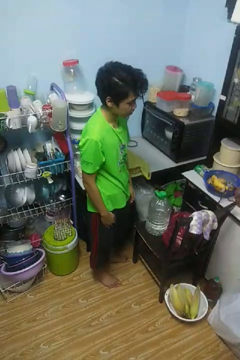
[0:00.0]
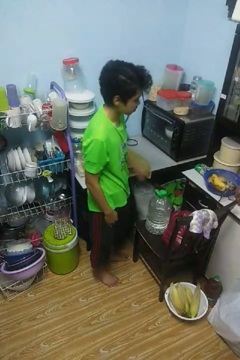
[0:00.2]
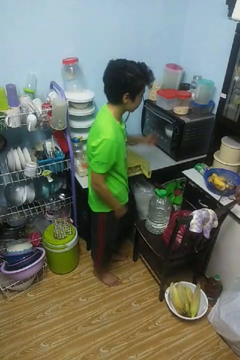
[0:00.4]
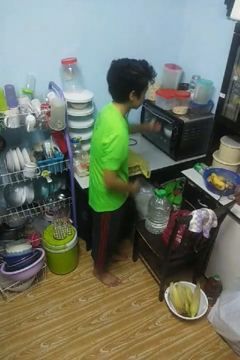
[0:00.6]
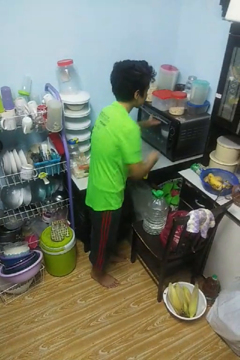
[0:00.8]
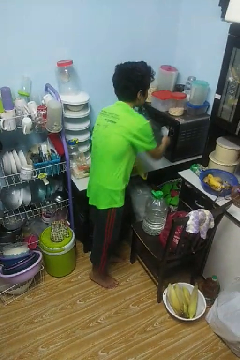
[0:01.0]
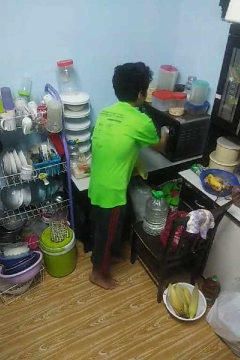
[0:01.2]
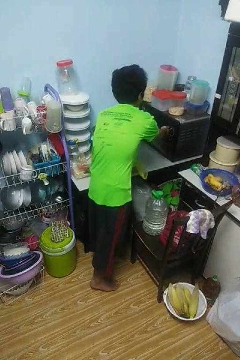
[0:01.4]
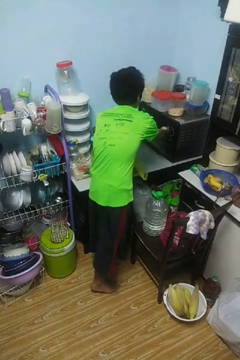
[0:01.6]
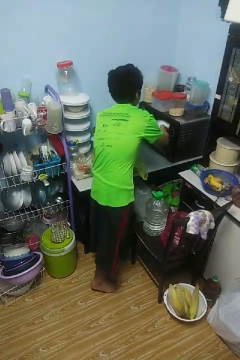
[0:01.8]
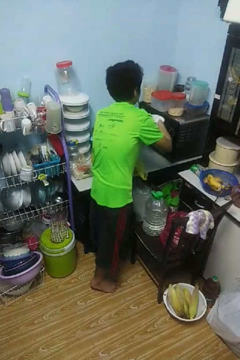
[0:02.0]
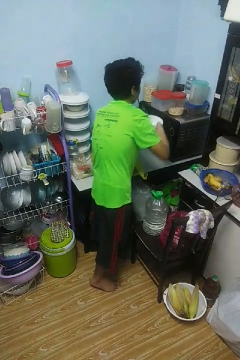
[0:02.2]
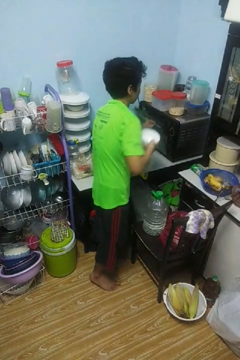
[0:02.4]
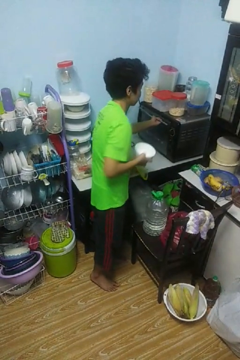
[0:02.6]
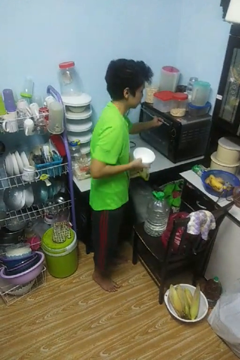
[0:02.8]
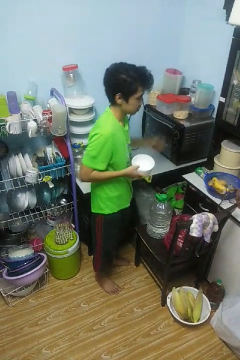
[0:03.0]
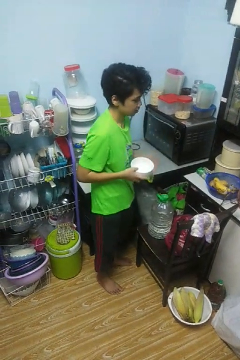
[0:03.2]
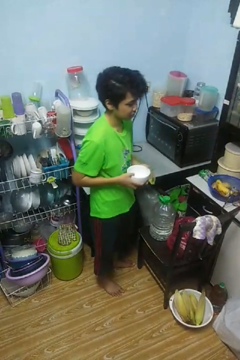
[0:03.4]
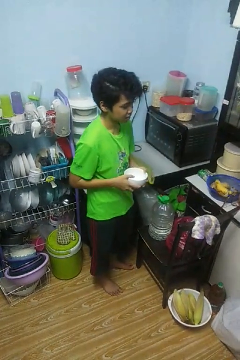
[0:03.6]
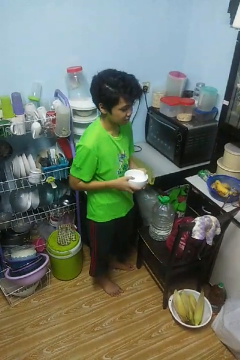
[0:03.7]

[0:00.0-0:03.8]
person takes object from microwave

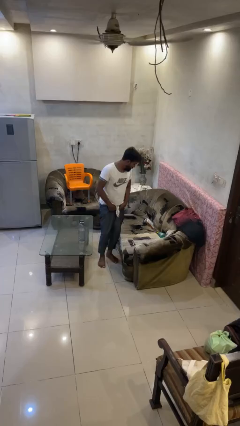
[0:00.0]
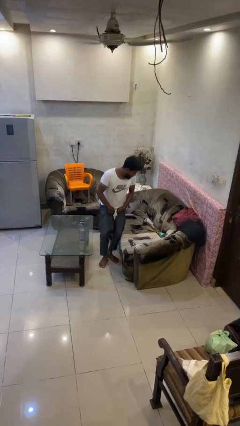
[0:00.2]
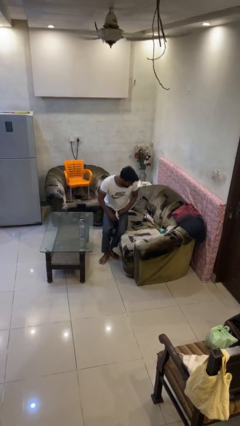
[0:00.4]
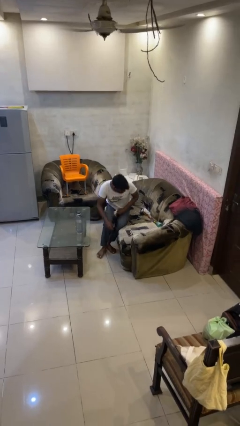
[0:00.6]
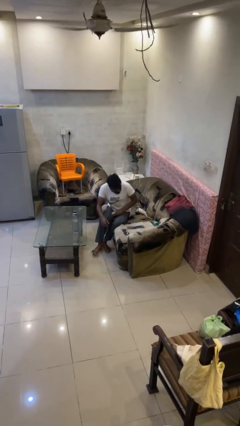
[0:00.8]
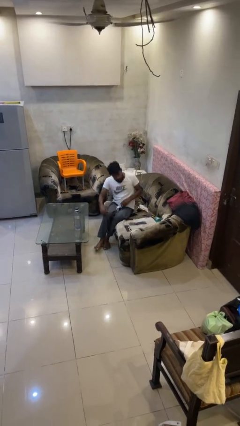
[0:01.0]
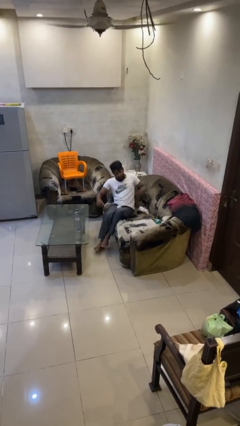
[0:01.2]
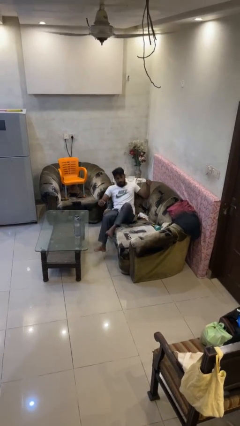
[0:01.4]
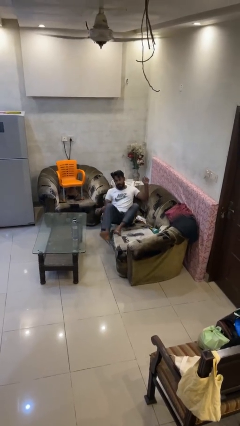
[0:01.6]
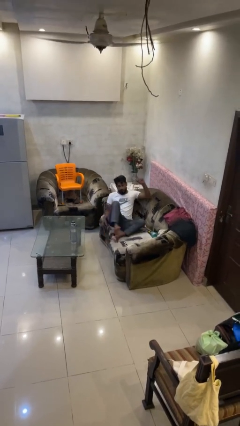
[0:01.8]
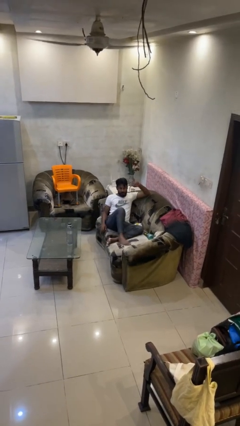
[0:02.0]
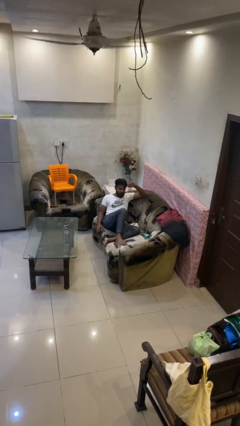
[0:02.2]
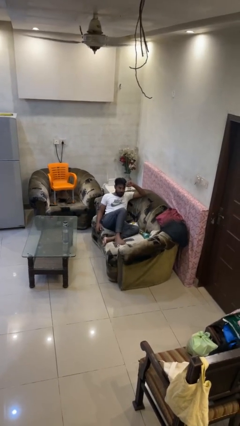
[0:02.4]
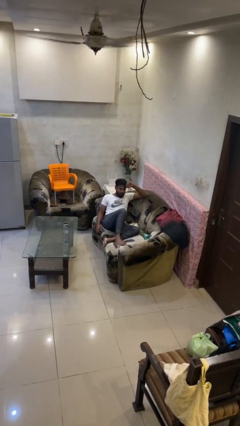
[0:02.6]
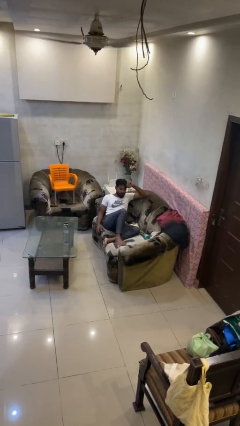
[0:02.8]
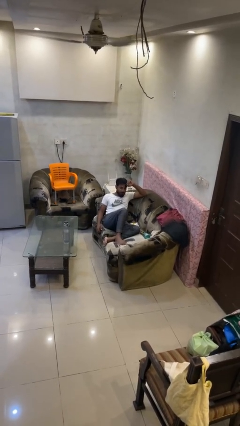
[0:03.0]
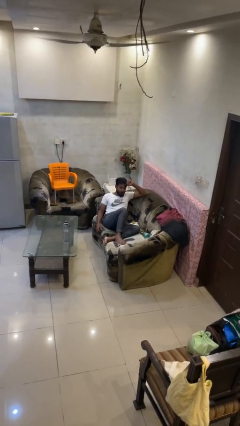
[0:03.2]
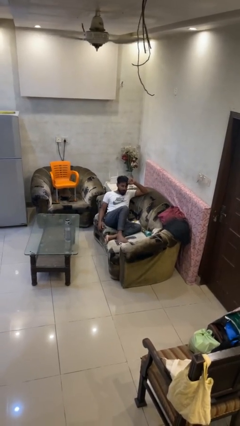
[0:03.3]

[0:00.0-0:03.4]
person lies down on couch

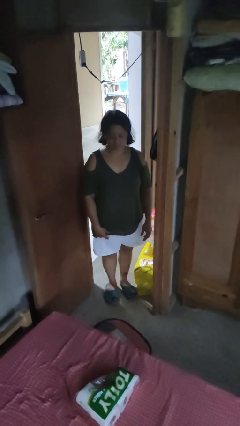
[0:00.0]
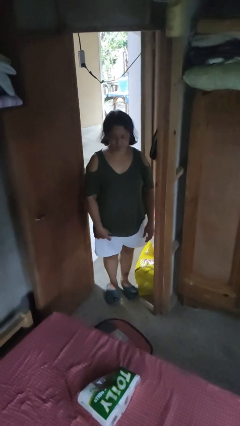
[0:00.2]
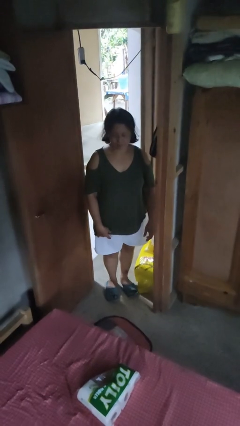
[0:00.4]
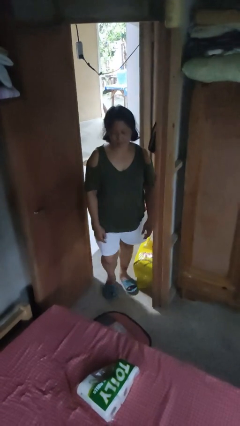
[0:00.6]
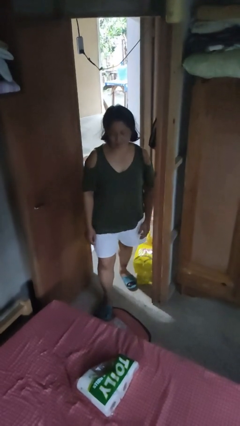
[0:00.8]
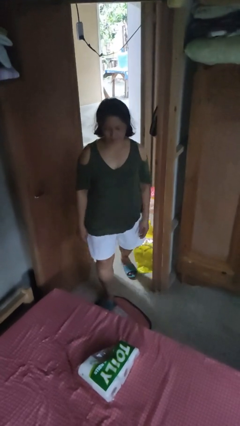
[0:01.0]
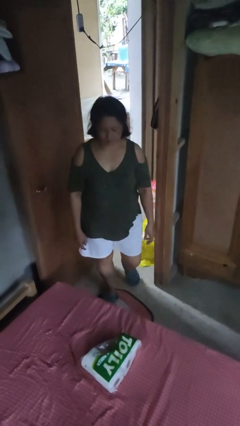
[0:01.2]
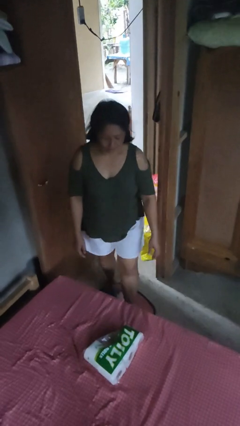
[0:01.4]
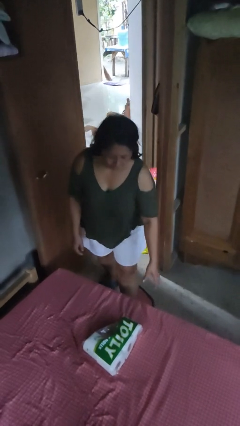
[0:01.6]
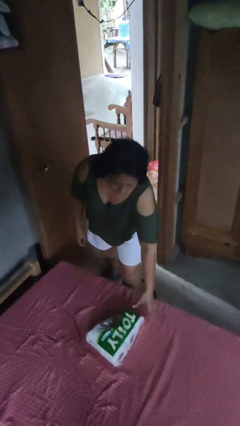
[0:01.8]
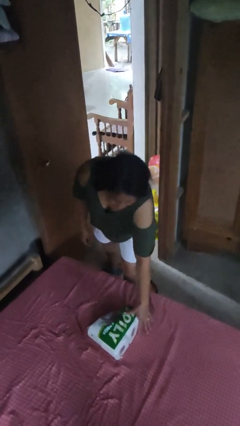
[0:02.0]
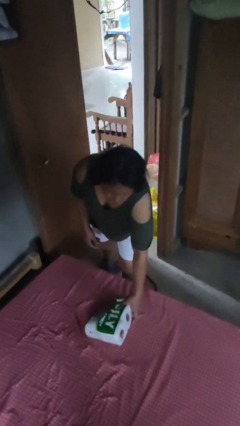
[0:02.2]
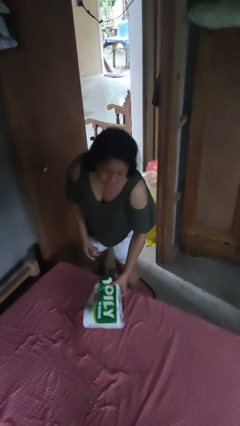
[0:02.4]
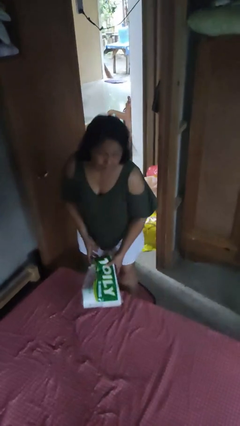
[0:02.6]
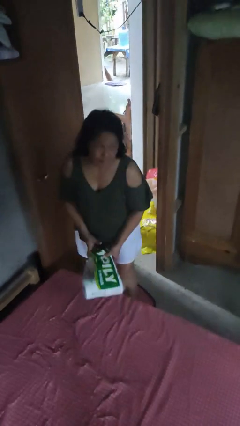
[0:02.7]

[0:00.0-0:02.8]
person picks up object from bed

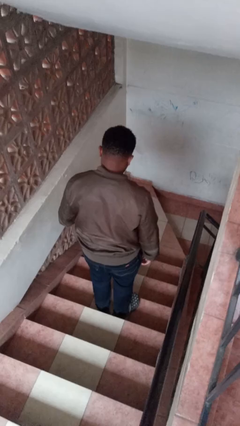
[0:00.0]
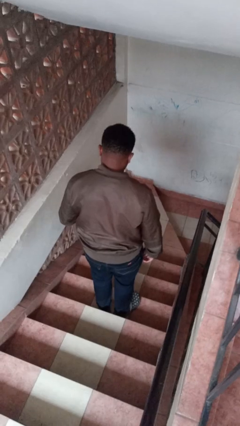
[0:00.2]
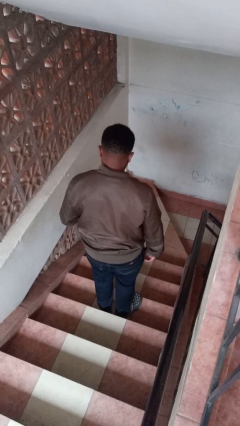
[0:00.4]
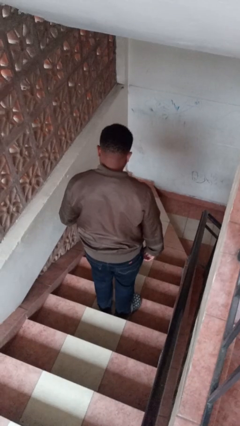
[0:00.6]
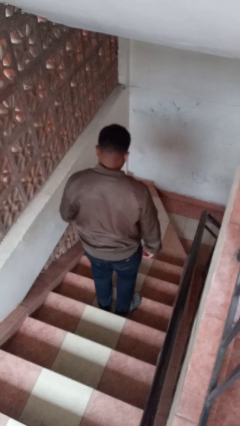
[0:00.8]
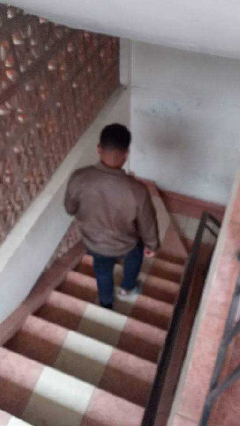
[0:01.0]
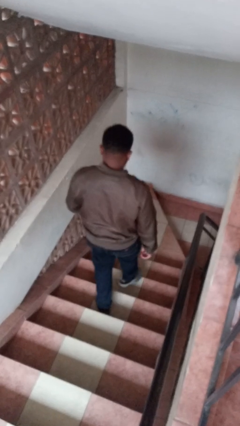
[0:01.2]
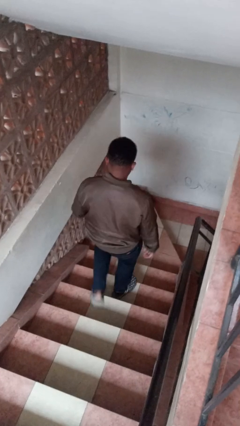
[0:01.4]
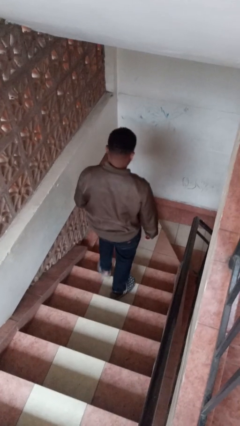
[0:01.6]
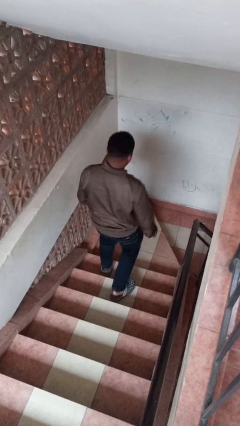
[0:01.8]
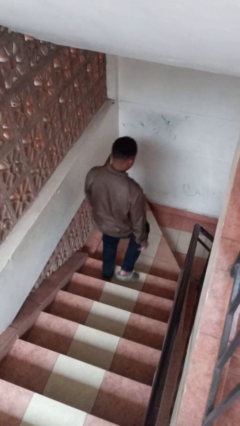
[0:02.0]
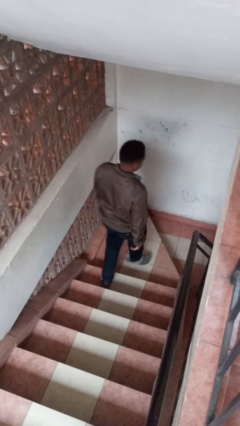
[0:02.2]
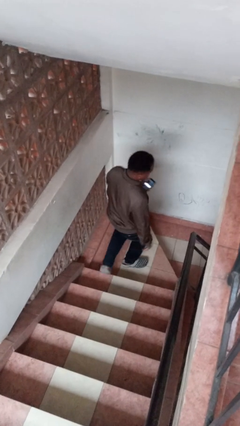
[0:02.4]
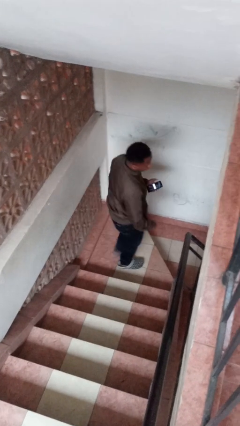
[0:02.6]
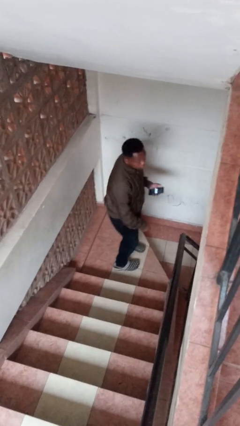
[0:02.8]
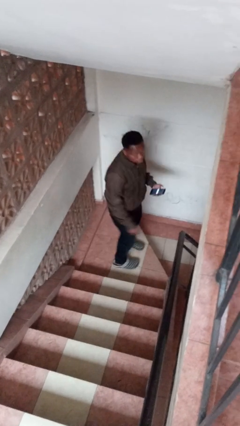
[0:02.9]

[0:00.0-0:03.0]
person climbs down stairs

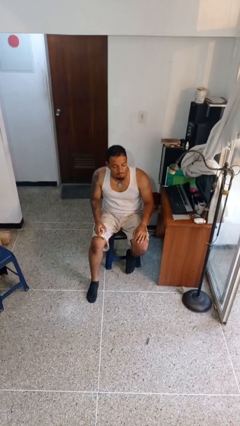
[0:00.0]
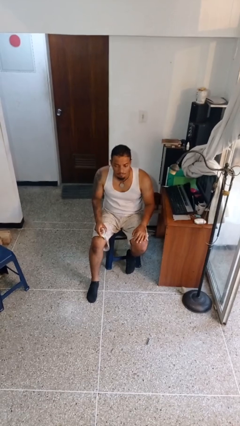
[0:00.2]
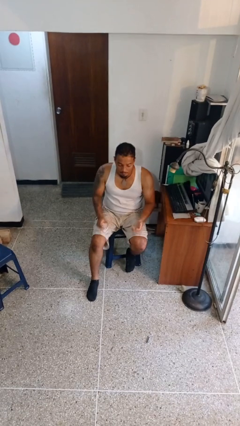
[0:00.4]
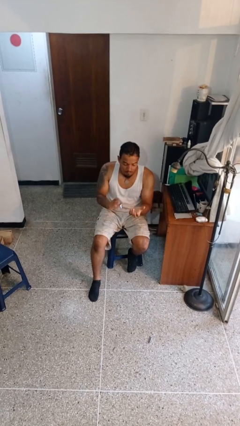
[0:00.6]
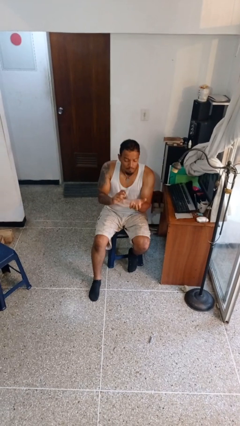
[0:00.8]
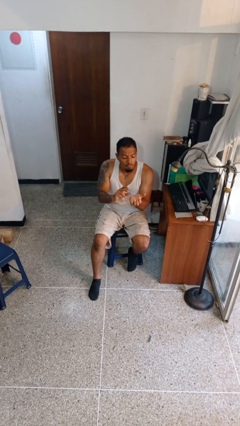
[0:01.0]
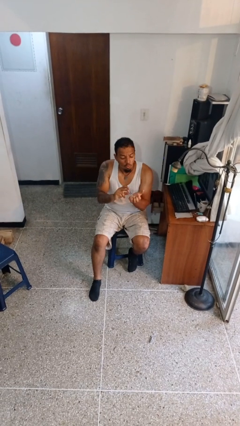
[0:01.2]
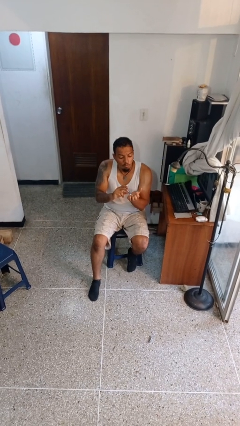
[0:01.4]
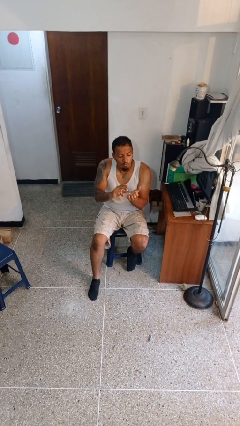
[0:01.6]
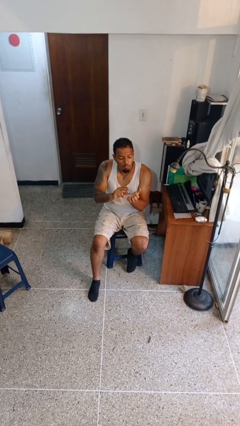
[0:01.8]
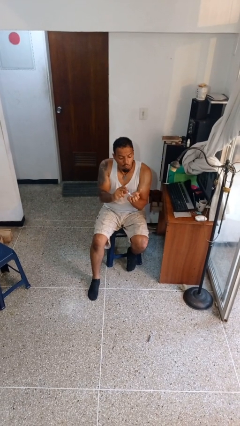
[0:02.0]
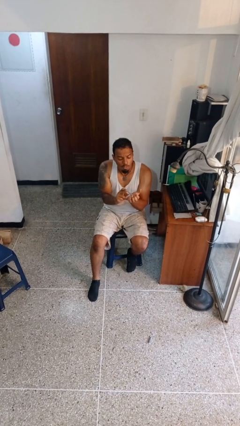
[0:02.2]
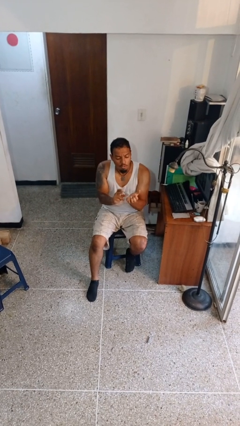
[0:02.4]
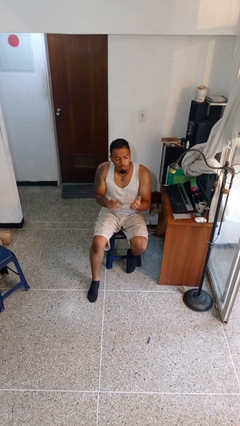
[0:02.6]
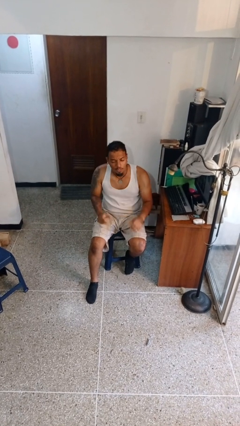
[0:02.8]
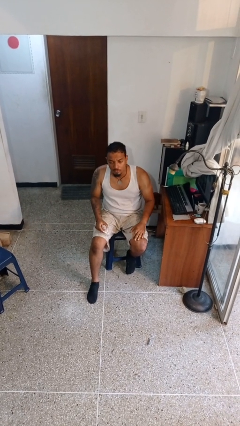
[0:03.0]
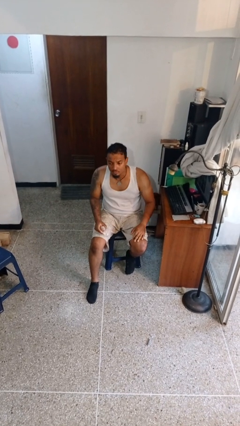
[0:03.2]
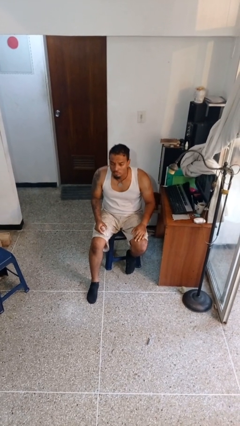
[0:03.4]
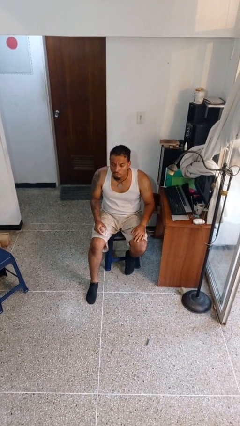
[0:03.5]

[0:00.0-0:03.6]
person clips fingernails

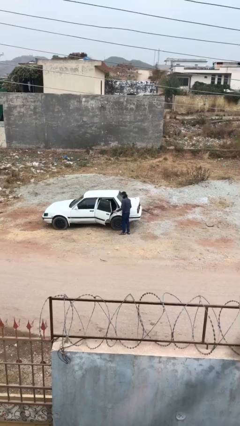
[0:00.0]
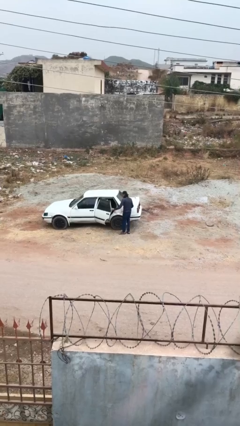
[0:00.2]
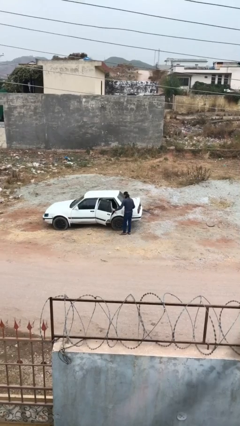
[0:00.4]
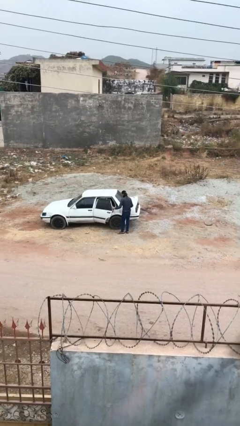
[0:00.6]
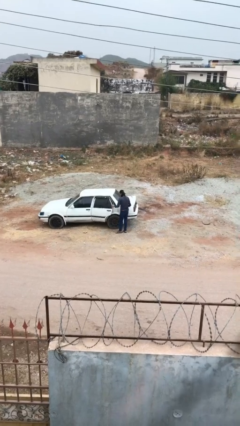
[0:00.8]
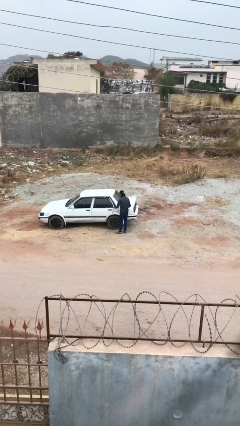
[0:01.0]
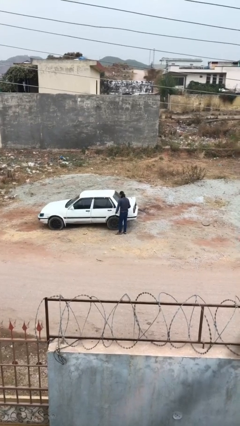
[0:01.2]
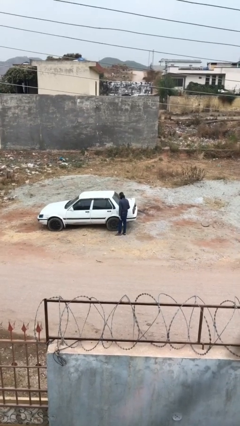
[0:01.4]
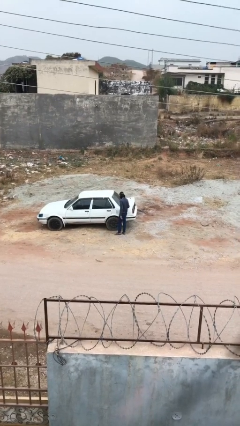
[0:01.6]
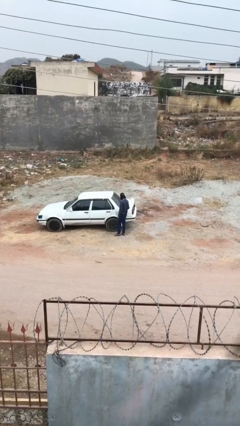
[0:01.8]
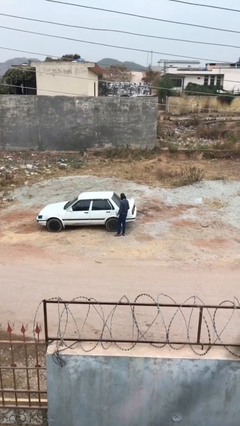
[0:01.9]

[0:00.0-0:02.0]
person closes car door
